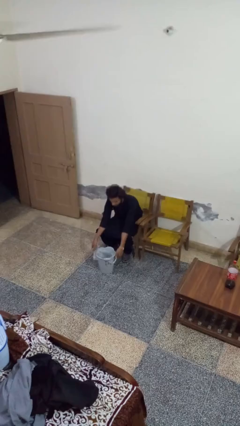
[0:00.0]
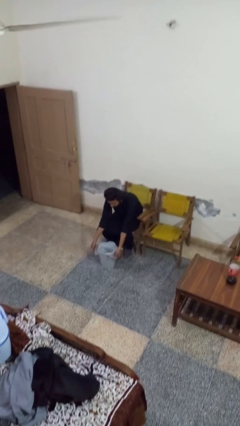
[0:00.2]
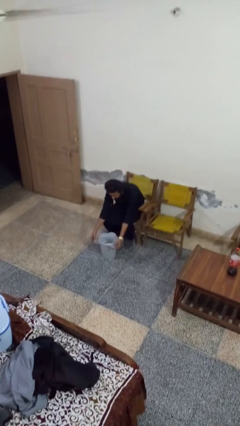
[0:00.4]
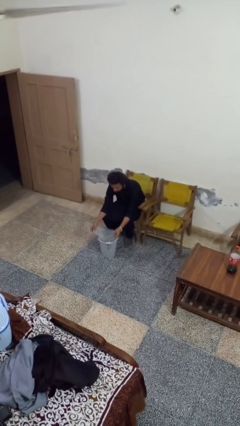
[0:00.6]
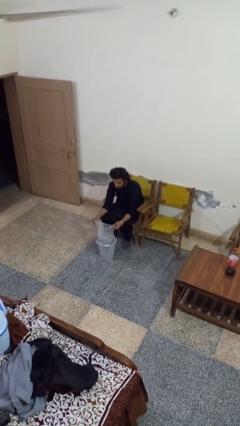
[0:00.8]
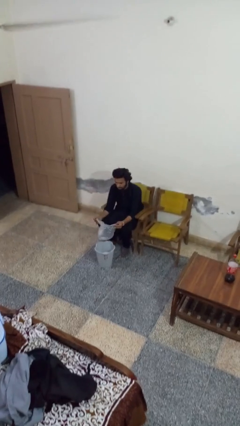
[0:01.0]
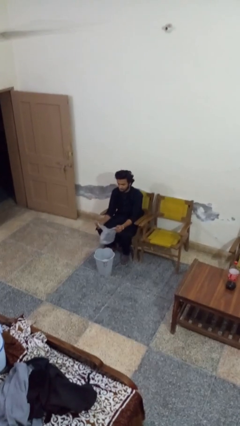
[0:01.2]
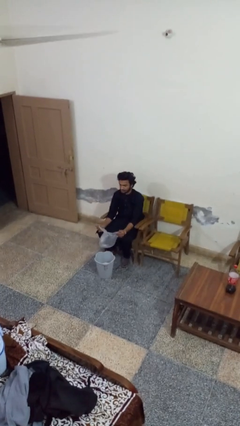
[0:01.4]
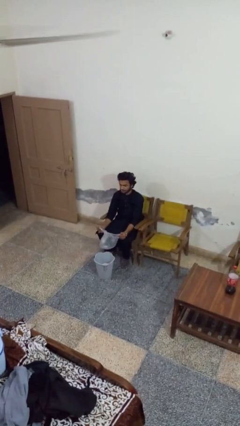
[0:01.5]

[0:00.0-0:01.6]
person removes trashbag from trashcan

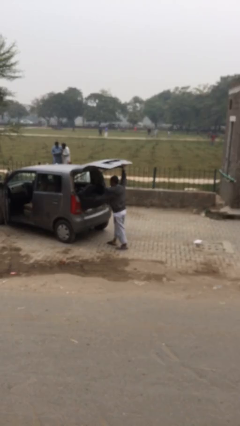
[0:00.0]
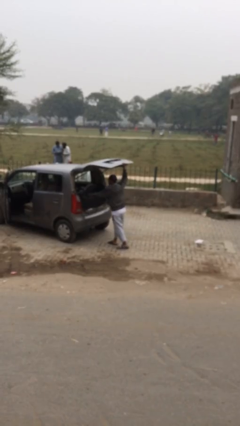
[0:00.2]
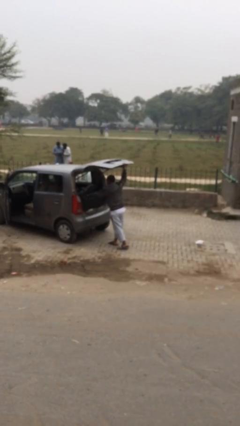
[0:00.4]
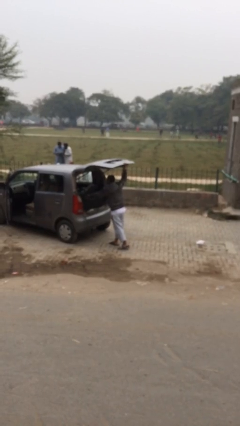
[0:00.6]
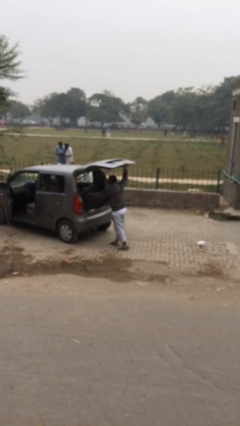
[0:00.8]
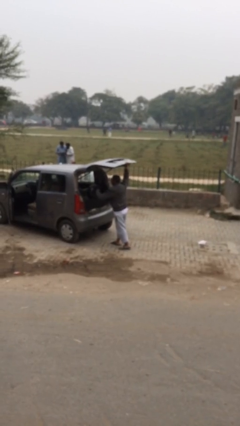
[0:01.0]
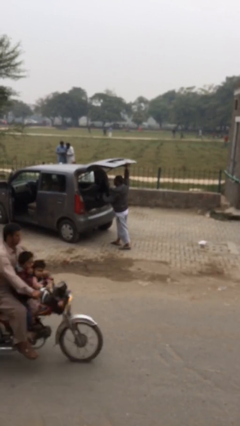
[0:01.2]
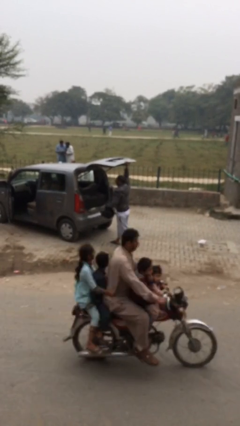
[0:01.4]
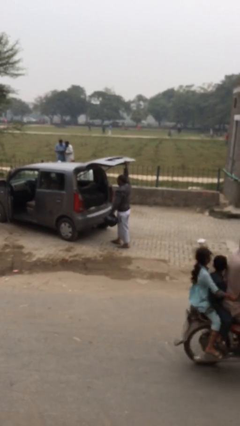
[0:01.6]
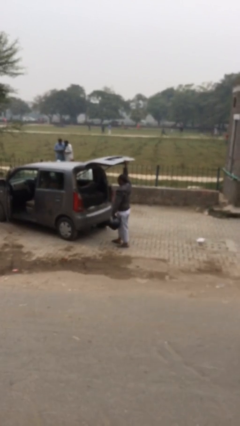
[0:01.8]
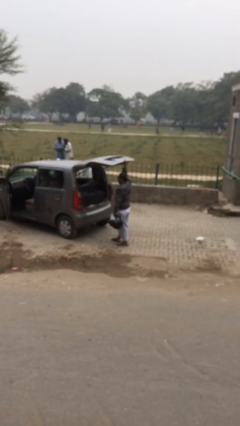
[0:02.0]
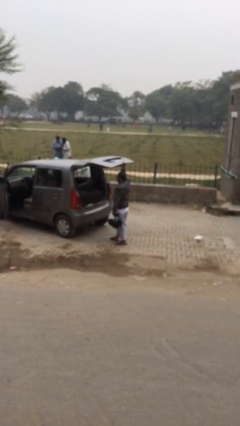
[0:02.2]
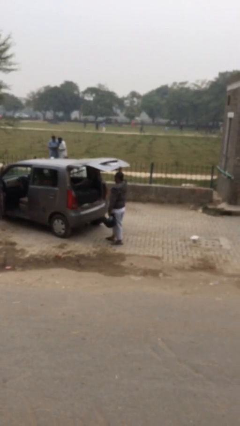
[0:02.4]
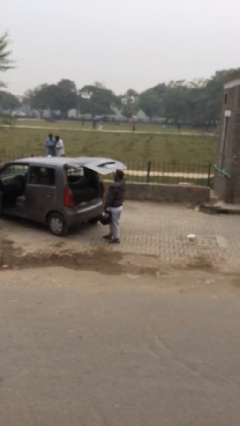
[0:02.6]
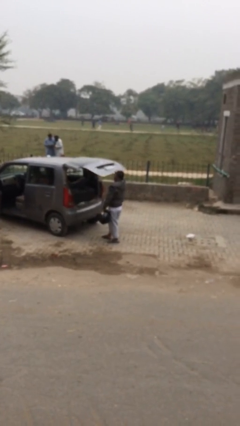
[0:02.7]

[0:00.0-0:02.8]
person unloads car

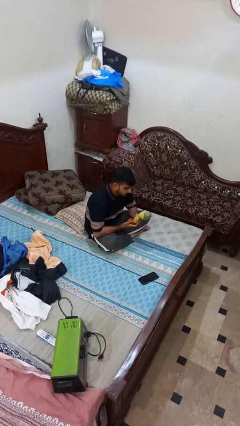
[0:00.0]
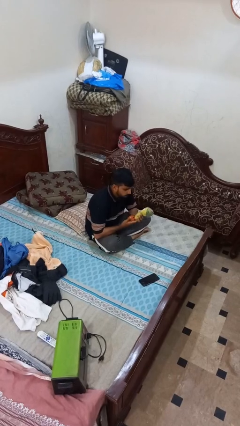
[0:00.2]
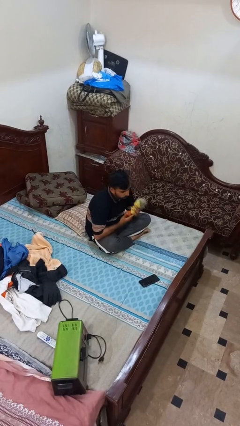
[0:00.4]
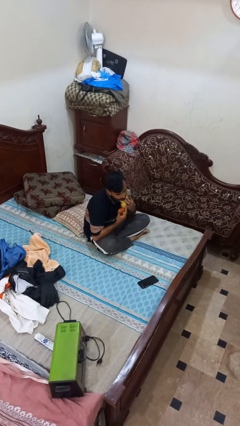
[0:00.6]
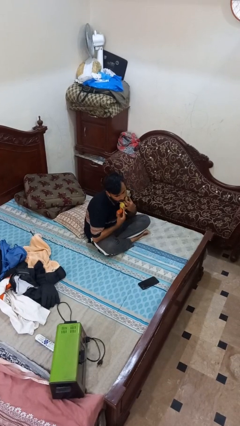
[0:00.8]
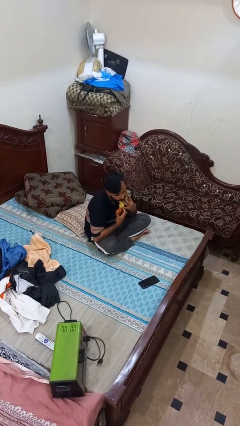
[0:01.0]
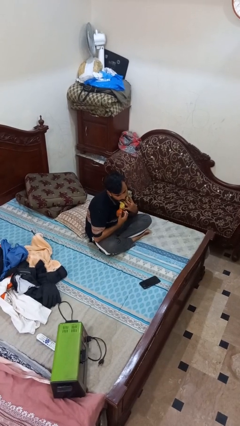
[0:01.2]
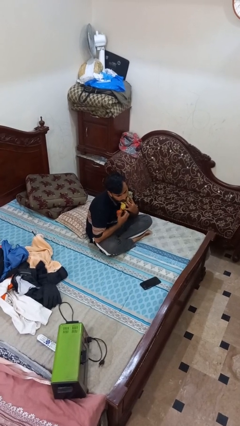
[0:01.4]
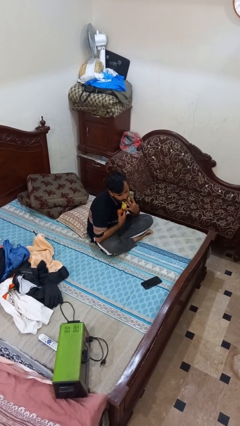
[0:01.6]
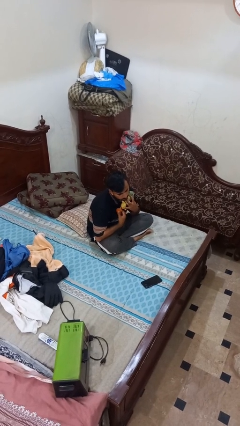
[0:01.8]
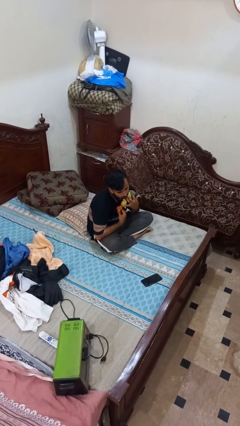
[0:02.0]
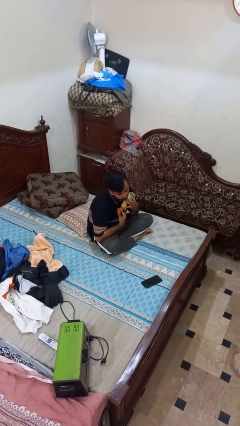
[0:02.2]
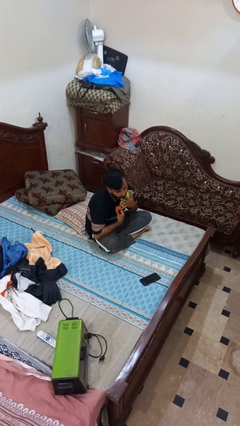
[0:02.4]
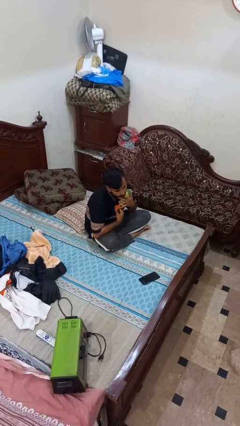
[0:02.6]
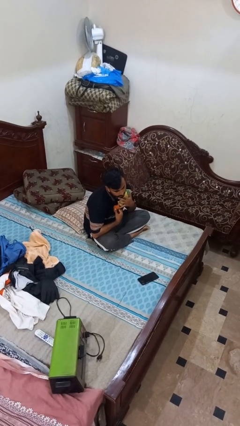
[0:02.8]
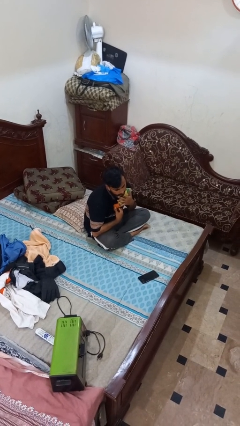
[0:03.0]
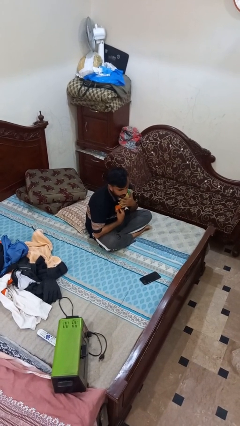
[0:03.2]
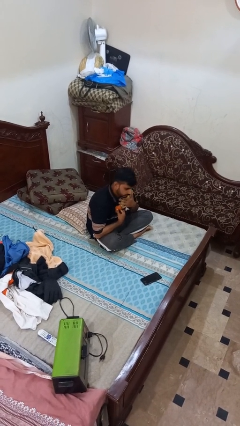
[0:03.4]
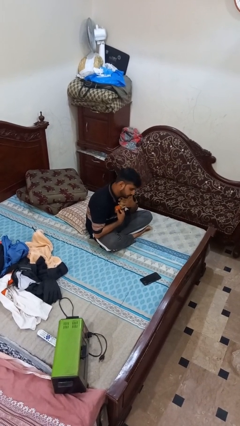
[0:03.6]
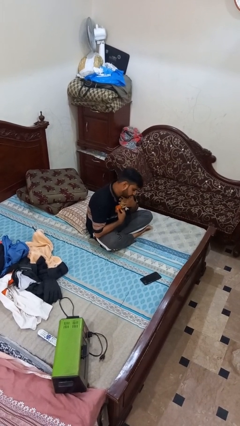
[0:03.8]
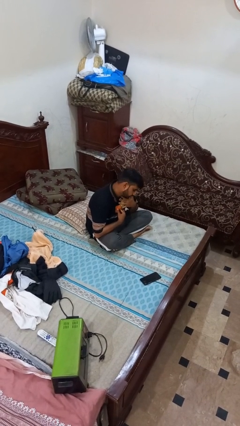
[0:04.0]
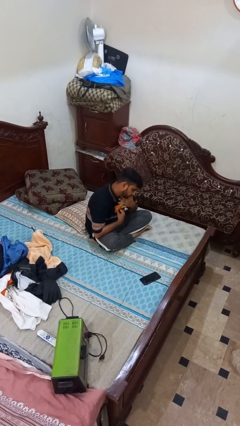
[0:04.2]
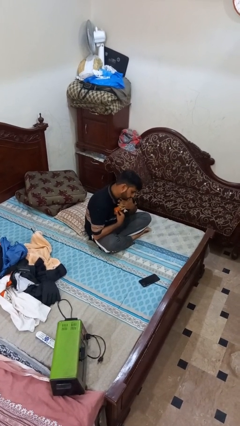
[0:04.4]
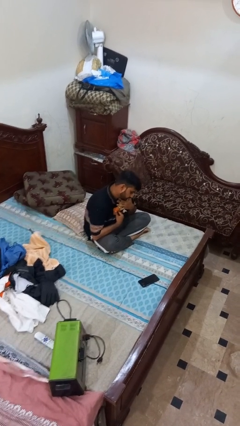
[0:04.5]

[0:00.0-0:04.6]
person hugs stuffed animal

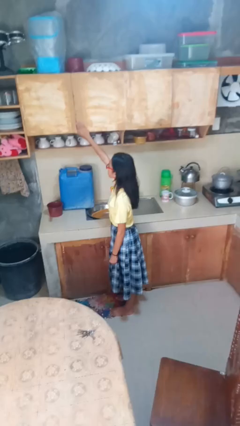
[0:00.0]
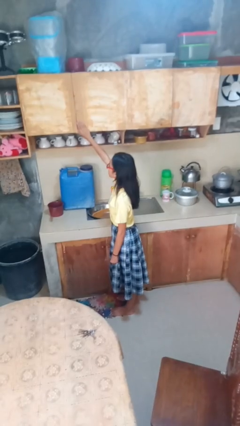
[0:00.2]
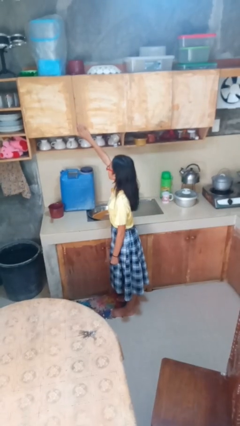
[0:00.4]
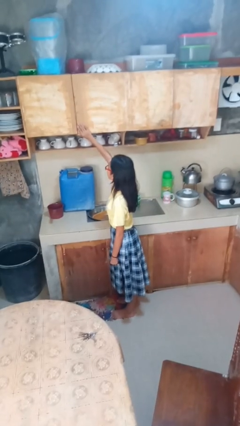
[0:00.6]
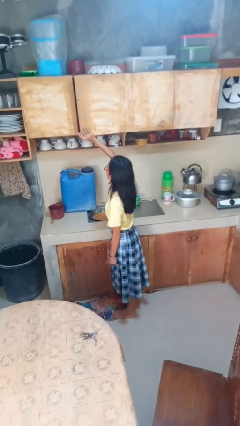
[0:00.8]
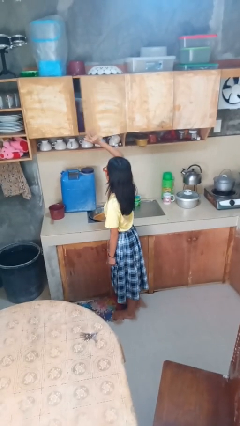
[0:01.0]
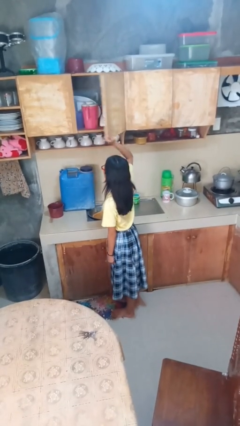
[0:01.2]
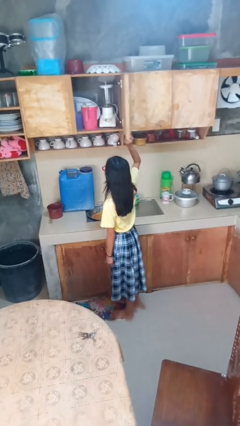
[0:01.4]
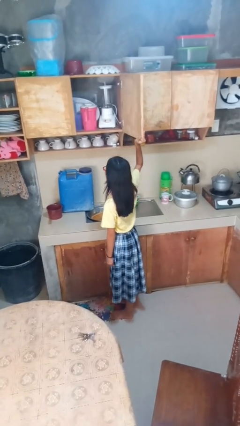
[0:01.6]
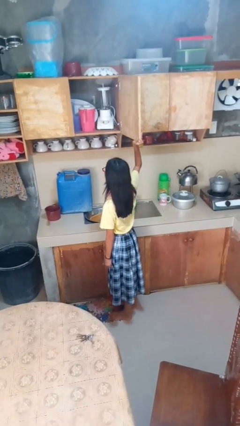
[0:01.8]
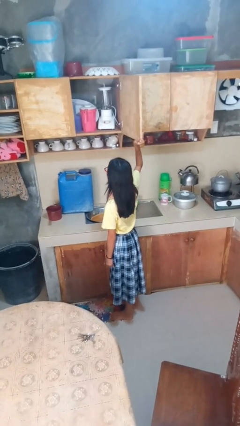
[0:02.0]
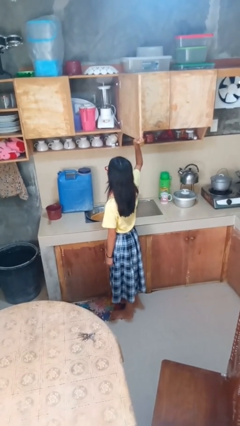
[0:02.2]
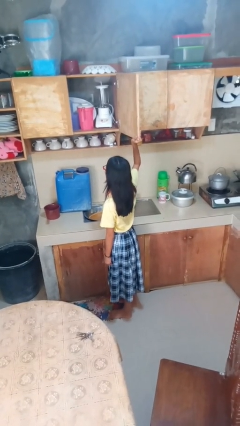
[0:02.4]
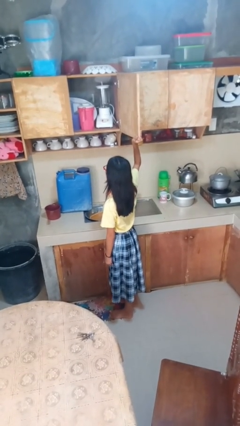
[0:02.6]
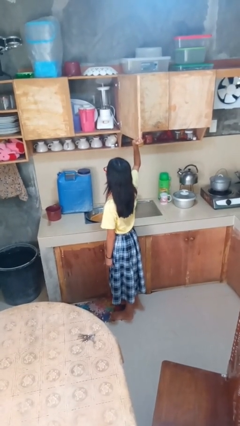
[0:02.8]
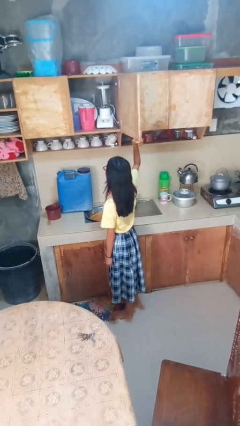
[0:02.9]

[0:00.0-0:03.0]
person opens cabinet

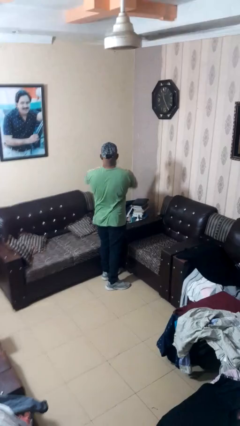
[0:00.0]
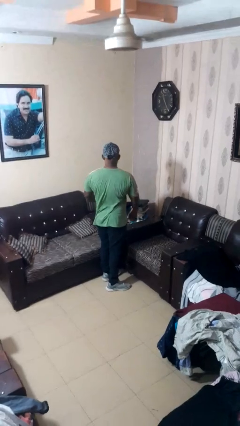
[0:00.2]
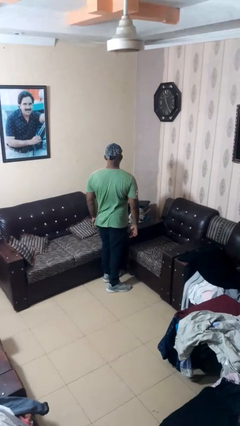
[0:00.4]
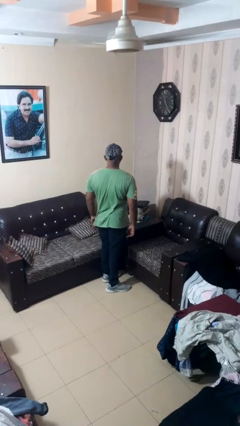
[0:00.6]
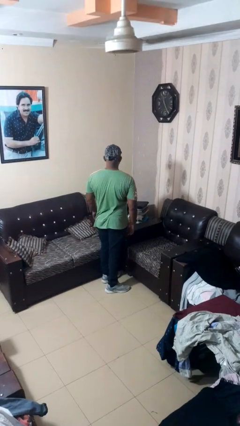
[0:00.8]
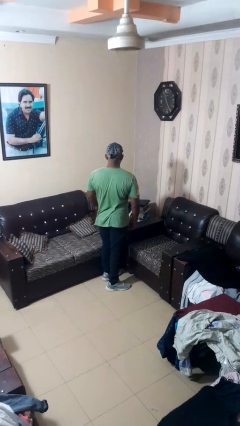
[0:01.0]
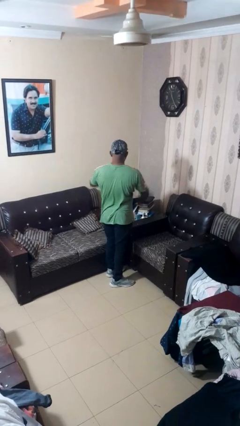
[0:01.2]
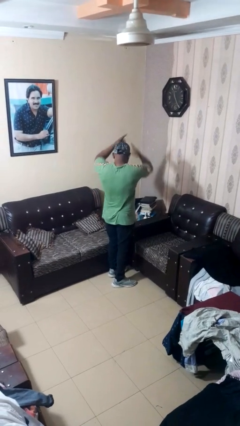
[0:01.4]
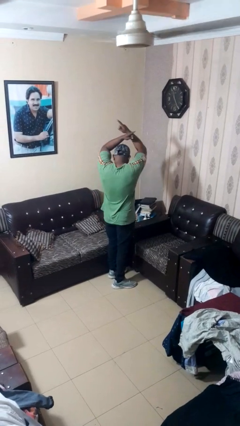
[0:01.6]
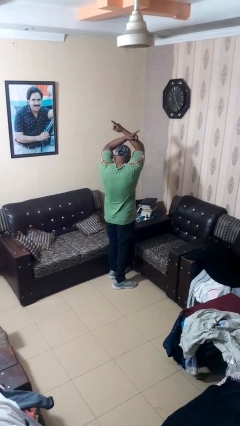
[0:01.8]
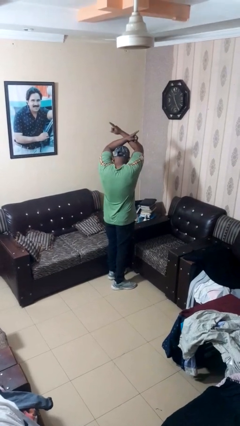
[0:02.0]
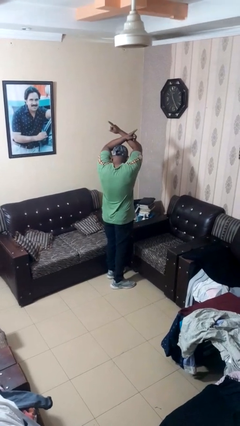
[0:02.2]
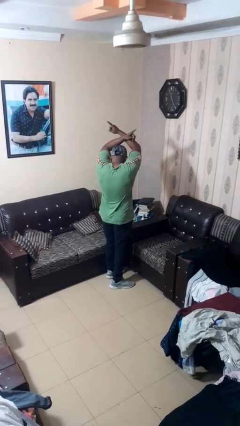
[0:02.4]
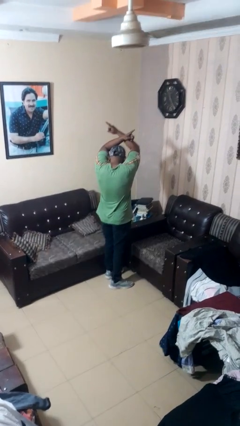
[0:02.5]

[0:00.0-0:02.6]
person gestures arms x

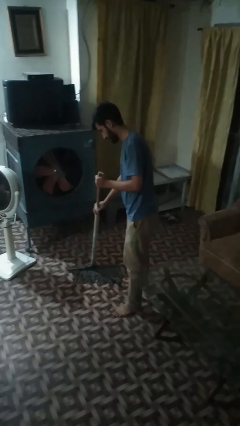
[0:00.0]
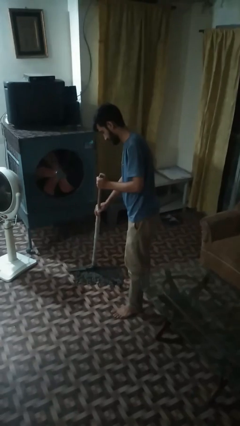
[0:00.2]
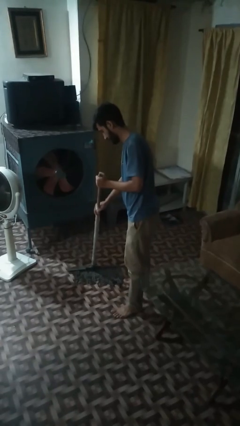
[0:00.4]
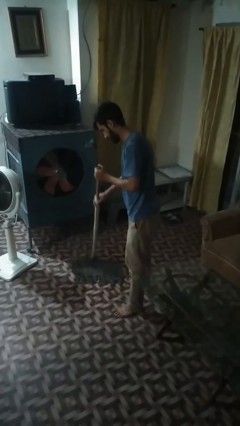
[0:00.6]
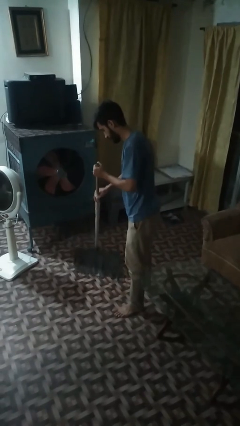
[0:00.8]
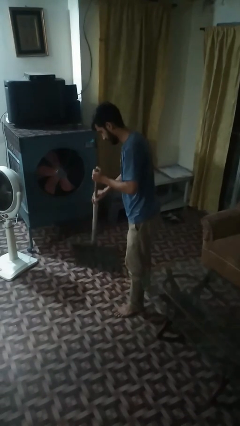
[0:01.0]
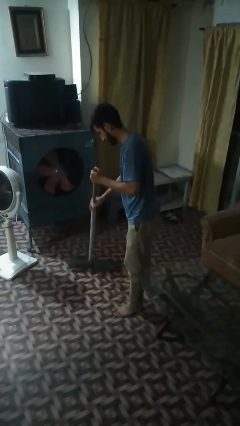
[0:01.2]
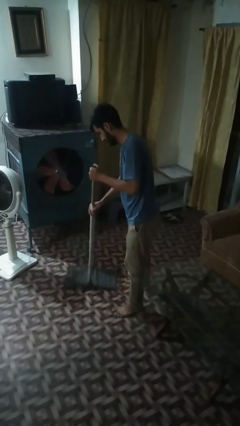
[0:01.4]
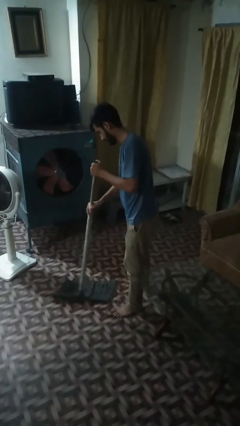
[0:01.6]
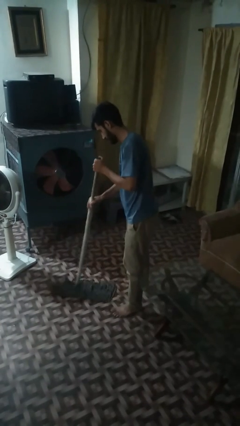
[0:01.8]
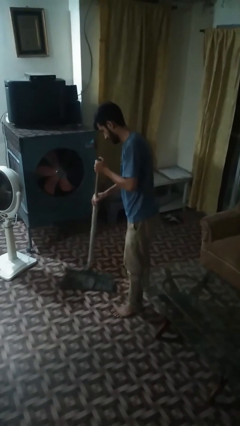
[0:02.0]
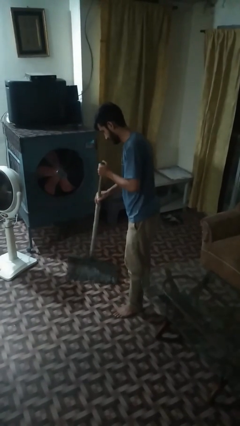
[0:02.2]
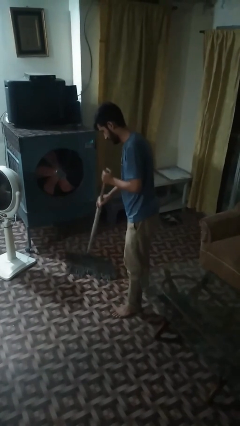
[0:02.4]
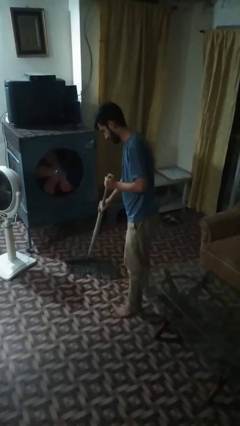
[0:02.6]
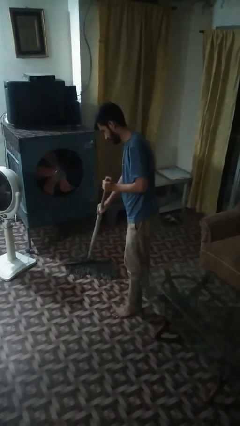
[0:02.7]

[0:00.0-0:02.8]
person mops
